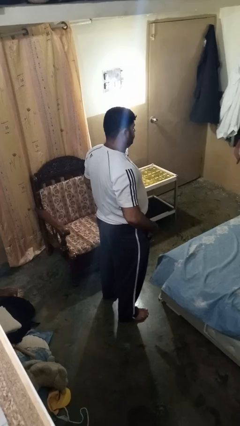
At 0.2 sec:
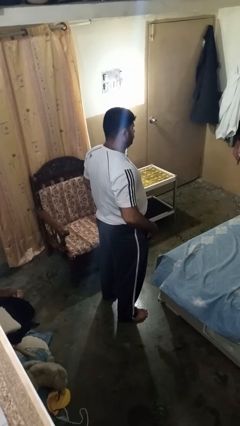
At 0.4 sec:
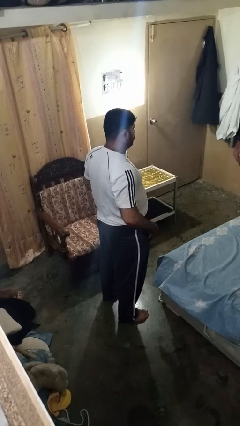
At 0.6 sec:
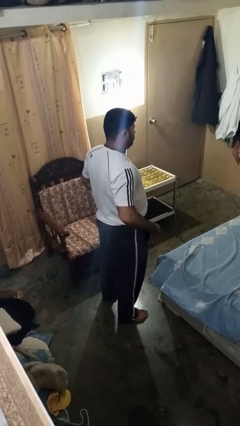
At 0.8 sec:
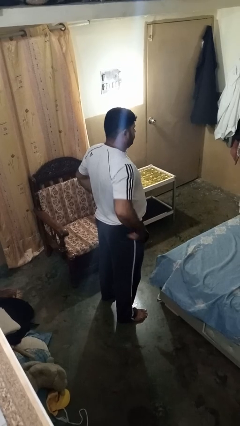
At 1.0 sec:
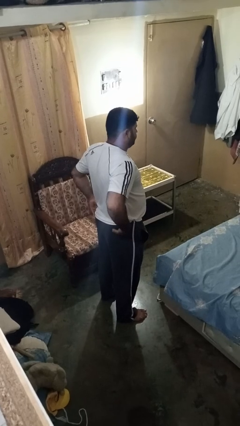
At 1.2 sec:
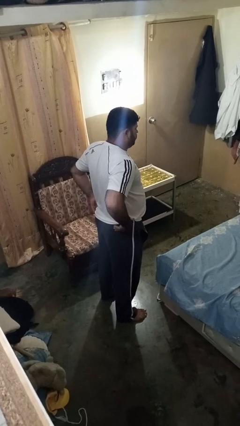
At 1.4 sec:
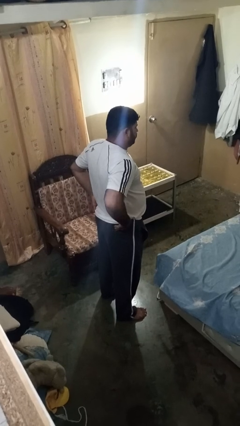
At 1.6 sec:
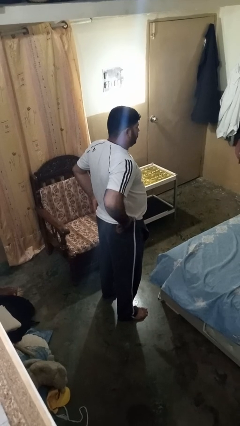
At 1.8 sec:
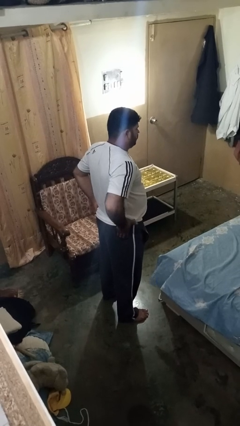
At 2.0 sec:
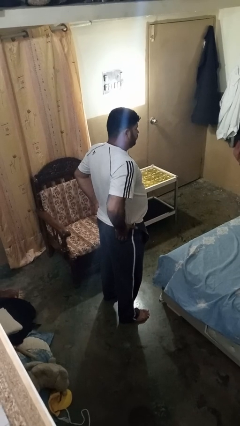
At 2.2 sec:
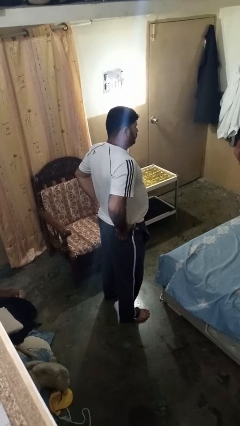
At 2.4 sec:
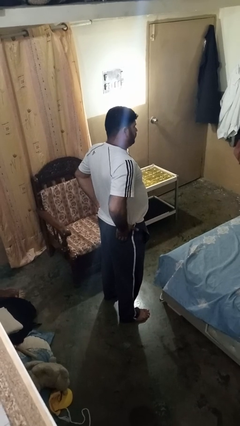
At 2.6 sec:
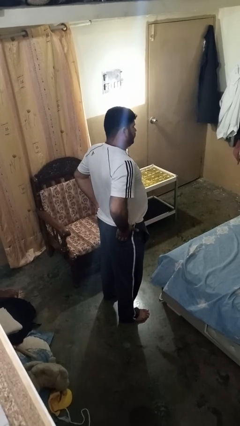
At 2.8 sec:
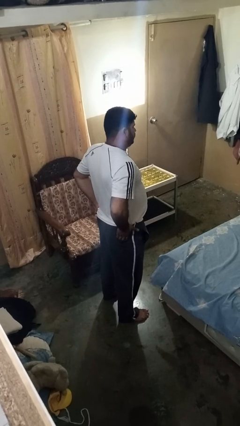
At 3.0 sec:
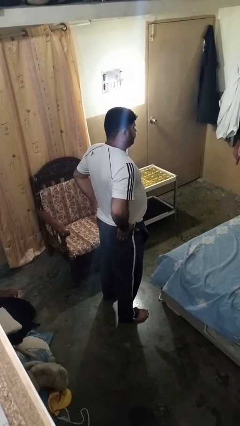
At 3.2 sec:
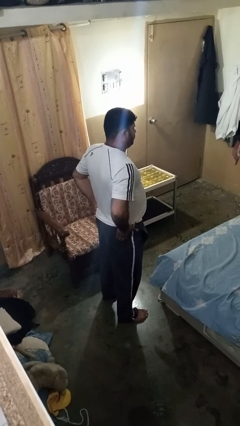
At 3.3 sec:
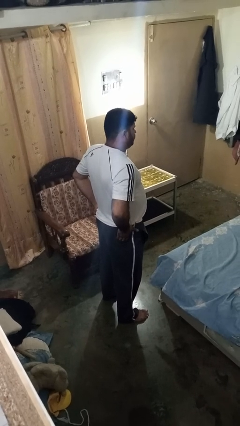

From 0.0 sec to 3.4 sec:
person puts hands in back pockets

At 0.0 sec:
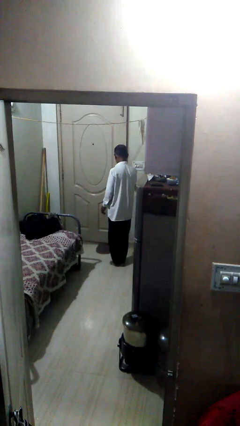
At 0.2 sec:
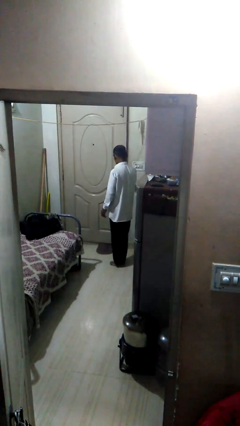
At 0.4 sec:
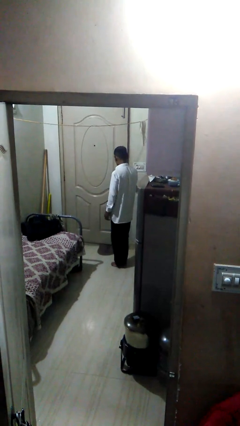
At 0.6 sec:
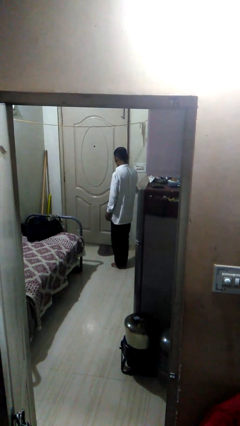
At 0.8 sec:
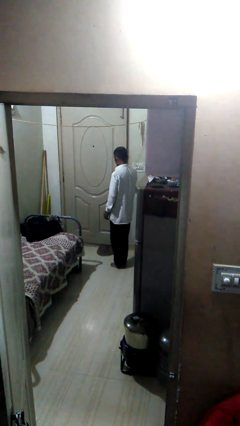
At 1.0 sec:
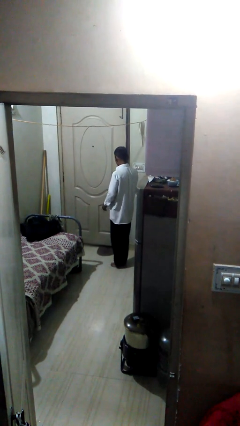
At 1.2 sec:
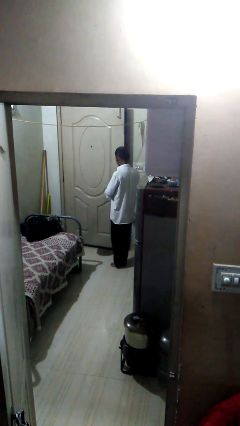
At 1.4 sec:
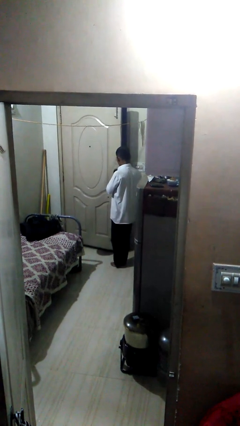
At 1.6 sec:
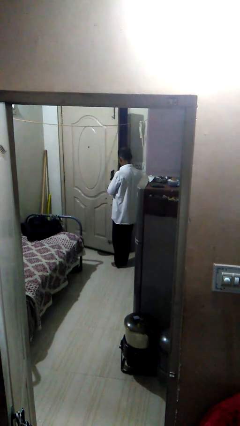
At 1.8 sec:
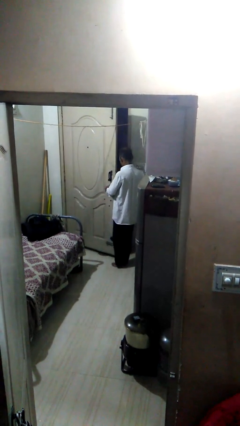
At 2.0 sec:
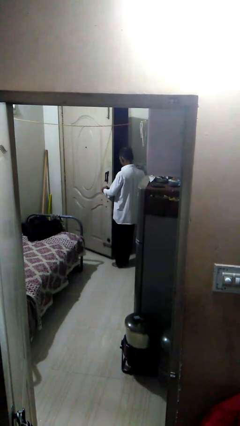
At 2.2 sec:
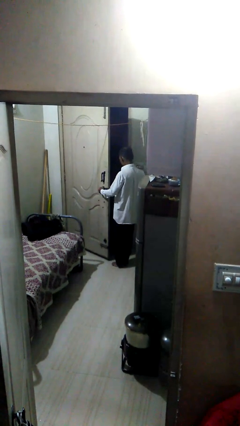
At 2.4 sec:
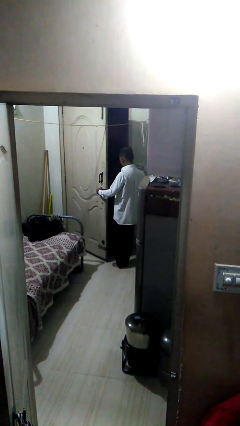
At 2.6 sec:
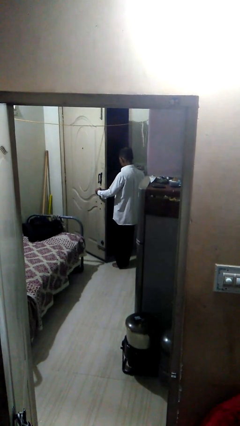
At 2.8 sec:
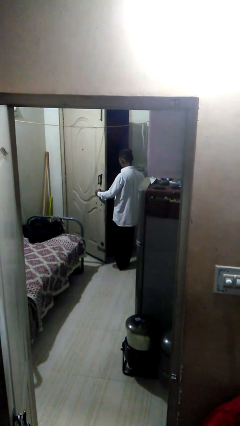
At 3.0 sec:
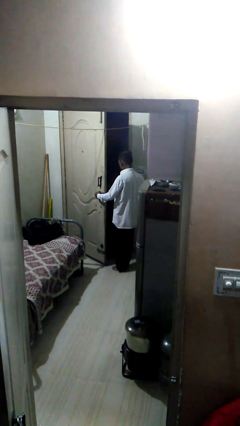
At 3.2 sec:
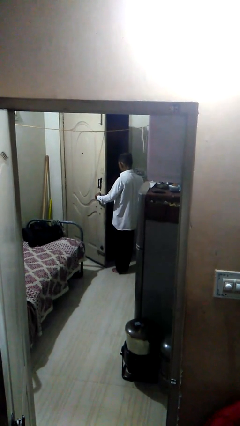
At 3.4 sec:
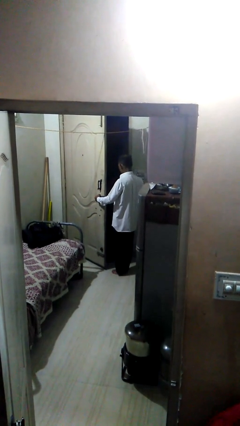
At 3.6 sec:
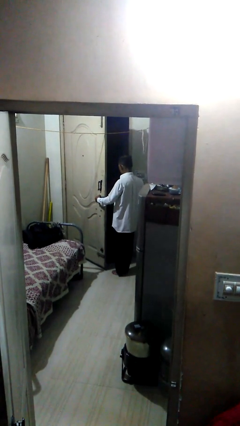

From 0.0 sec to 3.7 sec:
person opens facility door

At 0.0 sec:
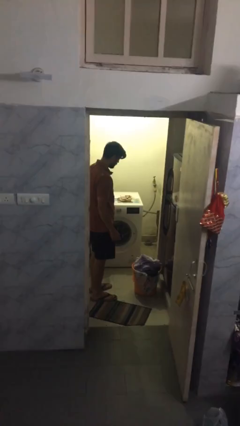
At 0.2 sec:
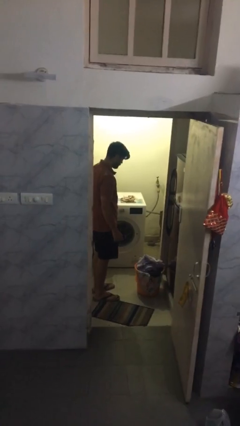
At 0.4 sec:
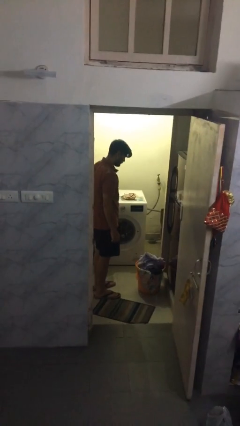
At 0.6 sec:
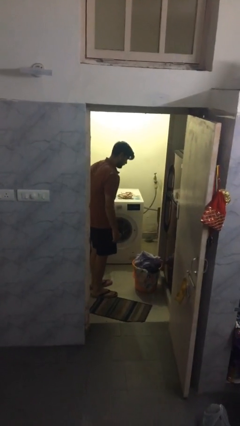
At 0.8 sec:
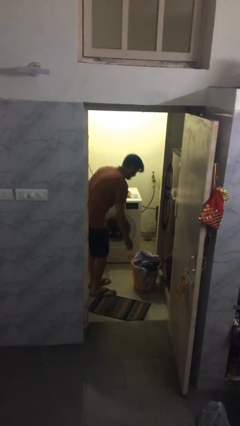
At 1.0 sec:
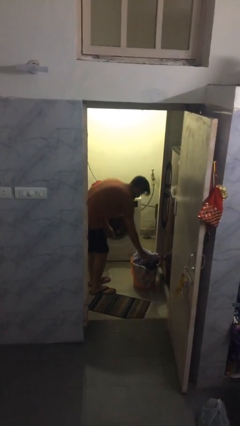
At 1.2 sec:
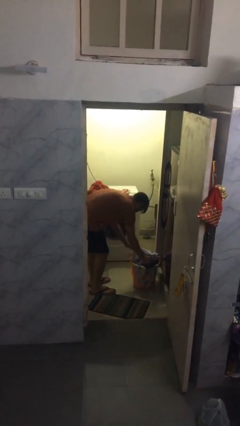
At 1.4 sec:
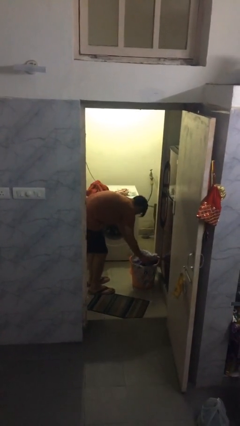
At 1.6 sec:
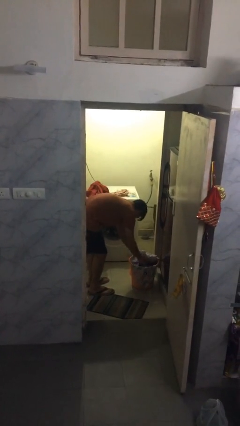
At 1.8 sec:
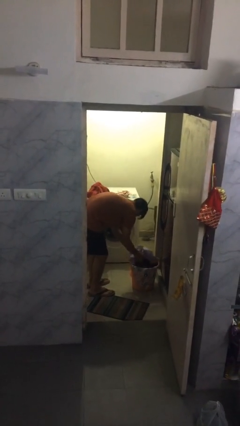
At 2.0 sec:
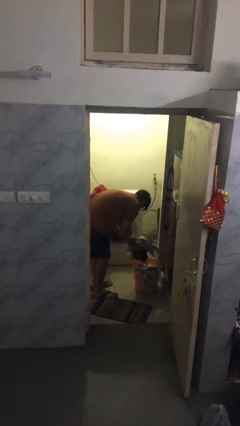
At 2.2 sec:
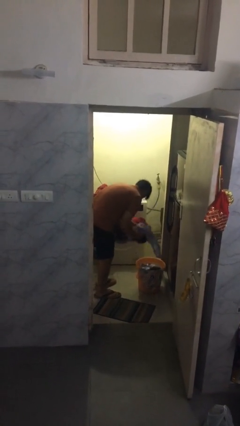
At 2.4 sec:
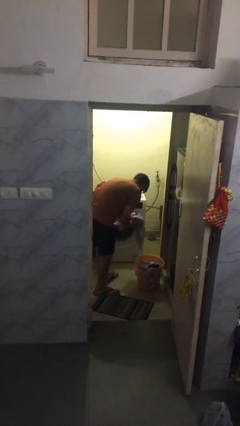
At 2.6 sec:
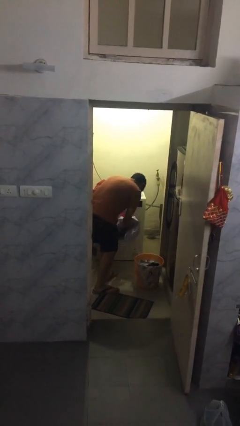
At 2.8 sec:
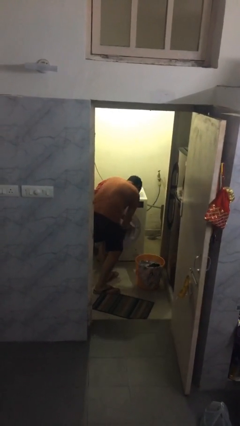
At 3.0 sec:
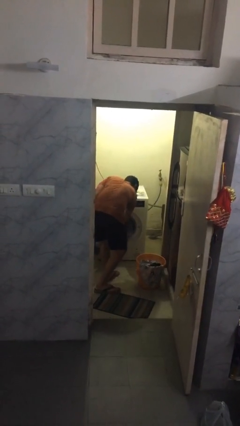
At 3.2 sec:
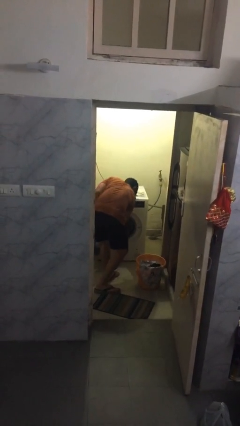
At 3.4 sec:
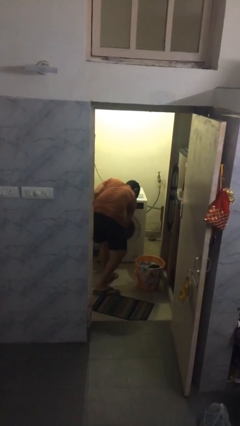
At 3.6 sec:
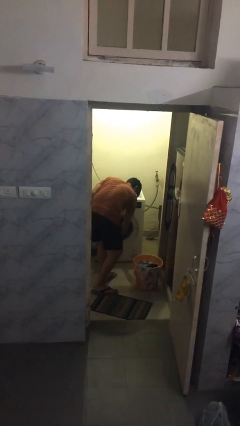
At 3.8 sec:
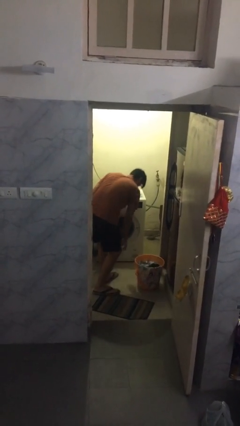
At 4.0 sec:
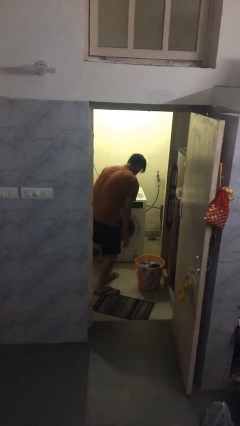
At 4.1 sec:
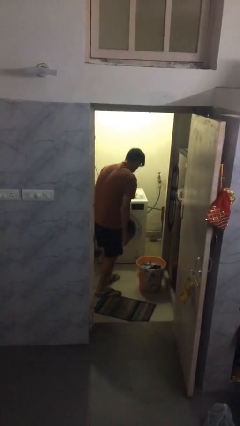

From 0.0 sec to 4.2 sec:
person loads dryer

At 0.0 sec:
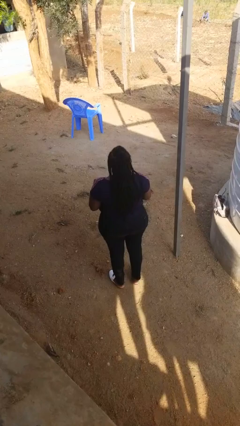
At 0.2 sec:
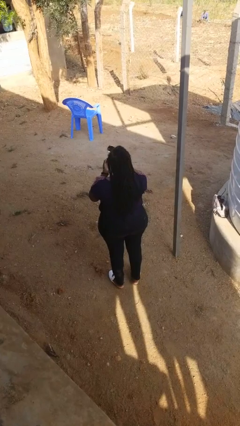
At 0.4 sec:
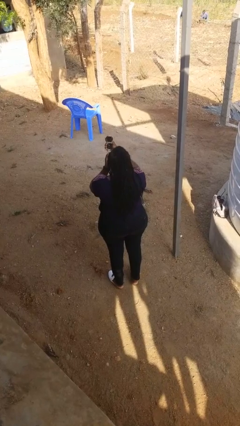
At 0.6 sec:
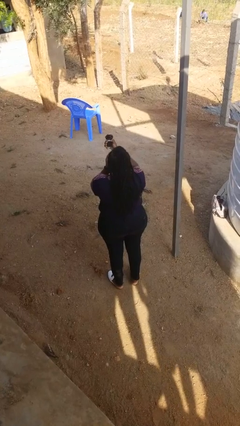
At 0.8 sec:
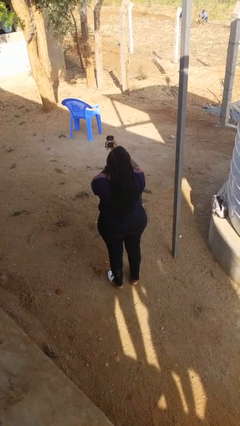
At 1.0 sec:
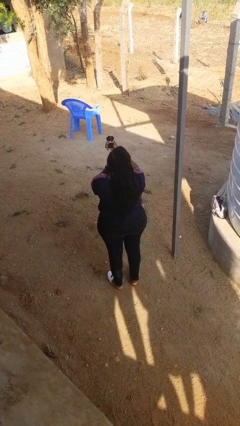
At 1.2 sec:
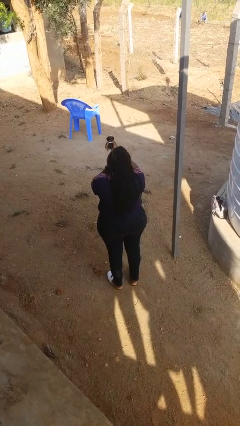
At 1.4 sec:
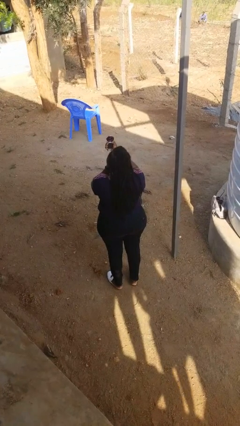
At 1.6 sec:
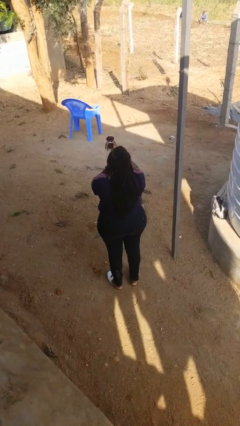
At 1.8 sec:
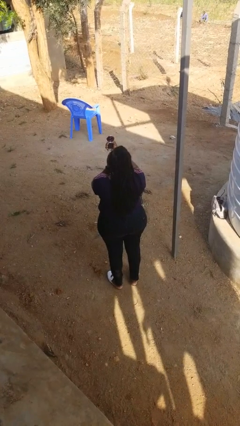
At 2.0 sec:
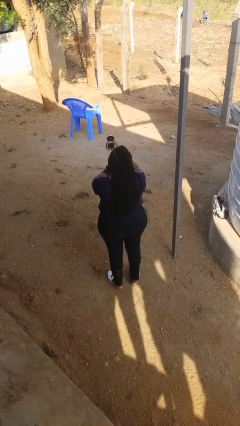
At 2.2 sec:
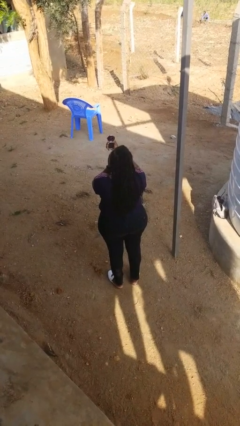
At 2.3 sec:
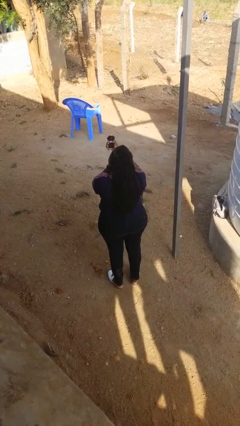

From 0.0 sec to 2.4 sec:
person applies eye makeup

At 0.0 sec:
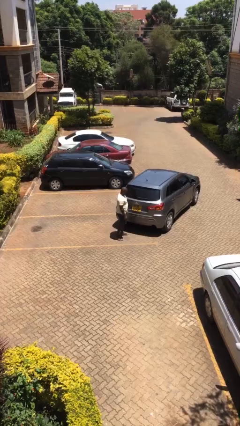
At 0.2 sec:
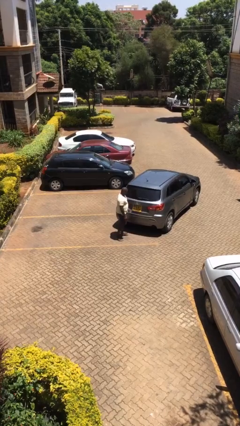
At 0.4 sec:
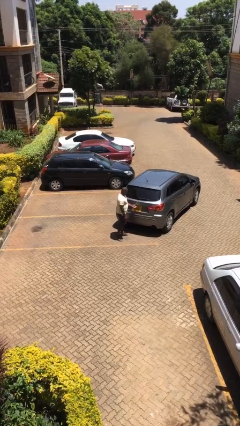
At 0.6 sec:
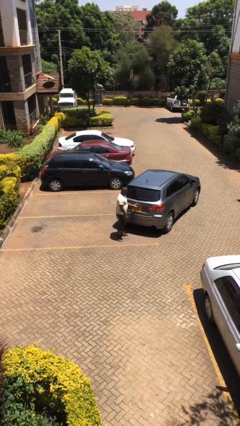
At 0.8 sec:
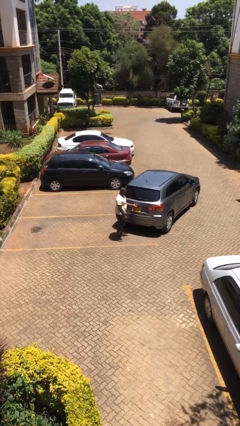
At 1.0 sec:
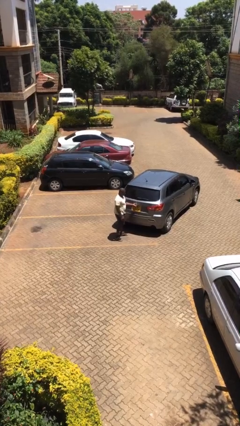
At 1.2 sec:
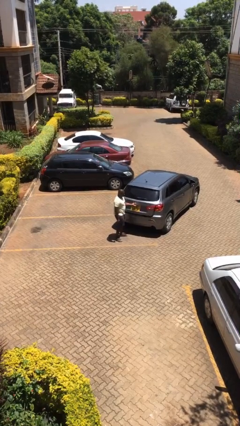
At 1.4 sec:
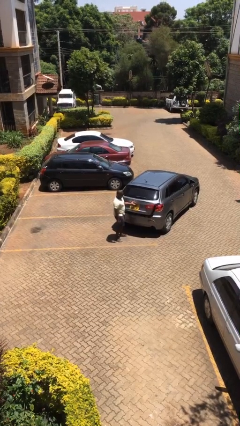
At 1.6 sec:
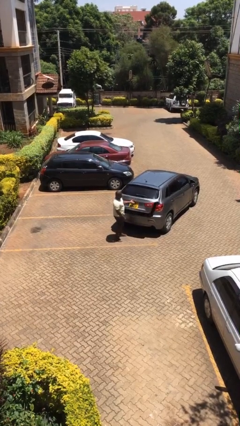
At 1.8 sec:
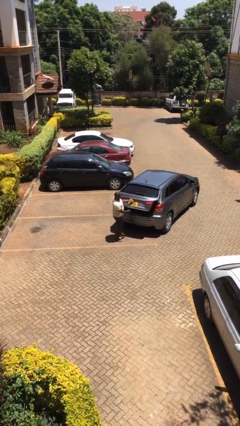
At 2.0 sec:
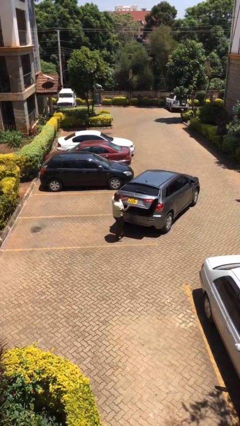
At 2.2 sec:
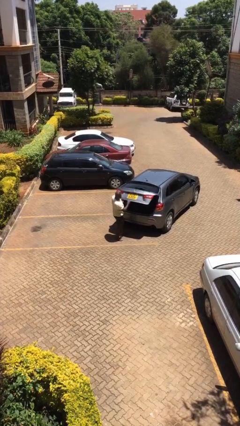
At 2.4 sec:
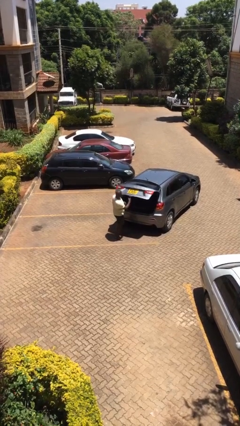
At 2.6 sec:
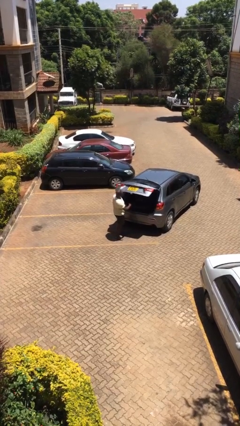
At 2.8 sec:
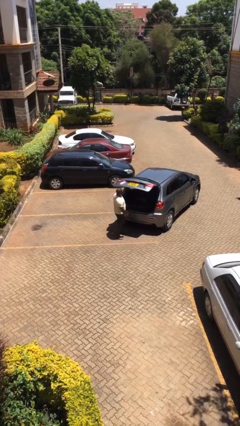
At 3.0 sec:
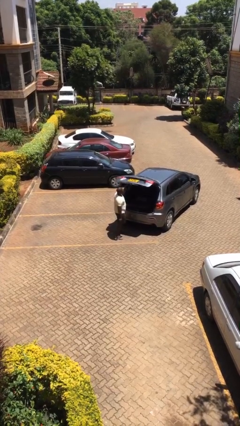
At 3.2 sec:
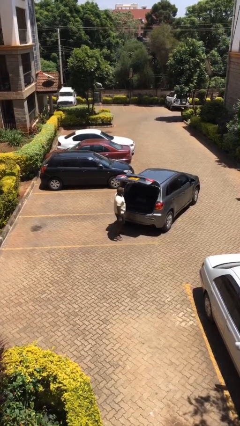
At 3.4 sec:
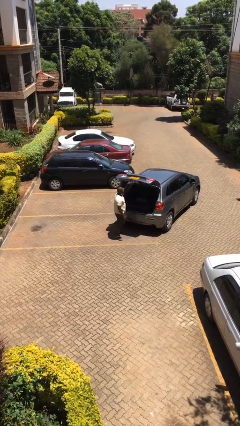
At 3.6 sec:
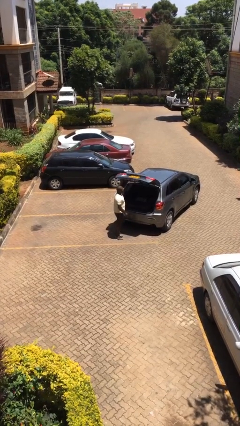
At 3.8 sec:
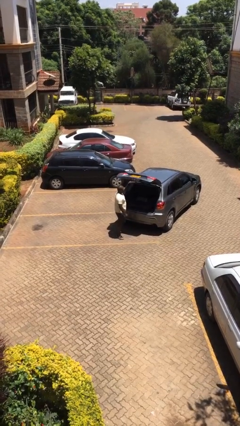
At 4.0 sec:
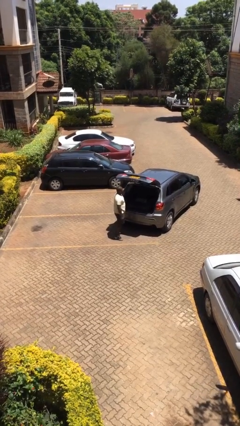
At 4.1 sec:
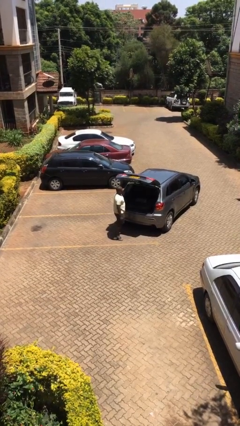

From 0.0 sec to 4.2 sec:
person opens car trunk
